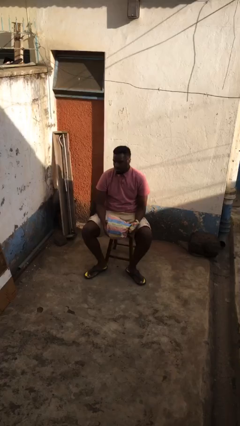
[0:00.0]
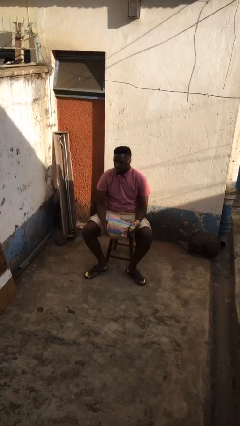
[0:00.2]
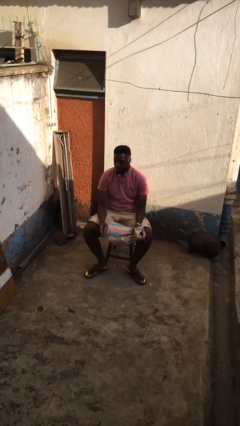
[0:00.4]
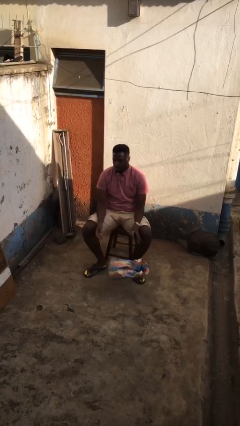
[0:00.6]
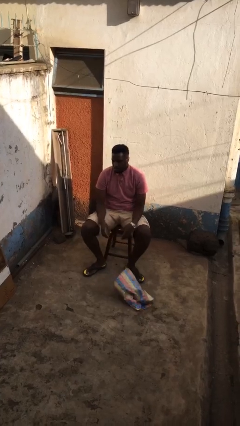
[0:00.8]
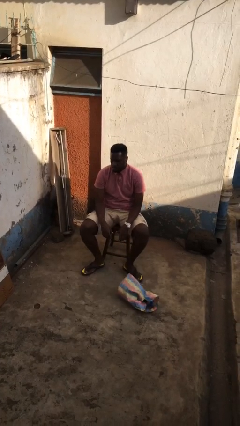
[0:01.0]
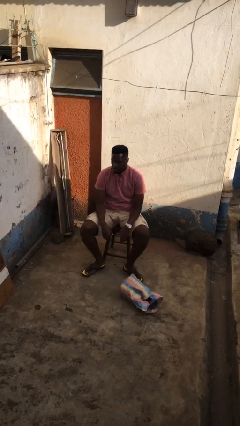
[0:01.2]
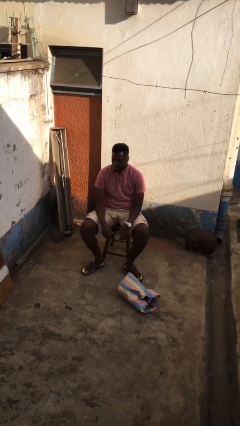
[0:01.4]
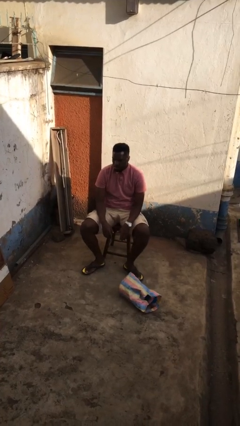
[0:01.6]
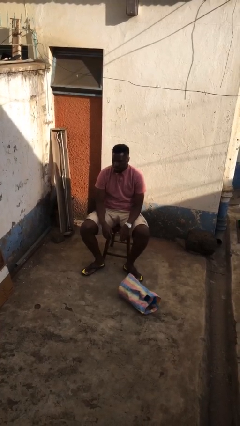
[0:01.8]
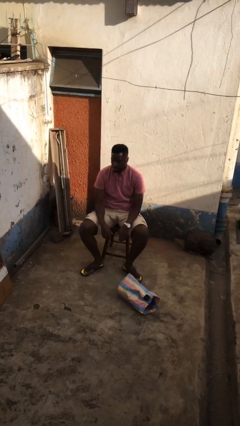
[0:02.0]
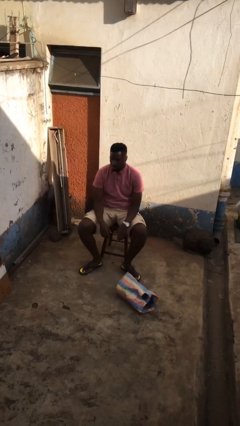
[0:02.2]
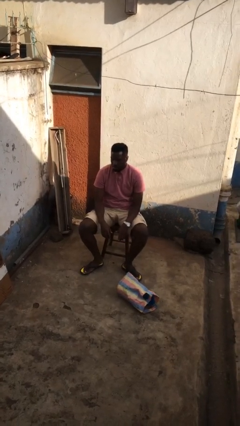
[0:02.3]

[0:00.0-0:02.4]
person drops object

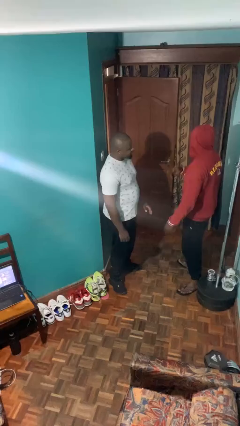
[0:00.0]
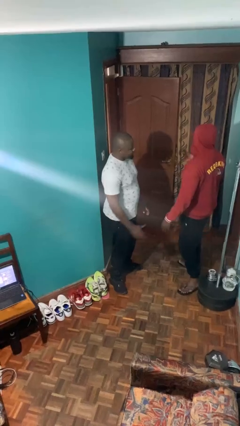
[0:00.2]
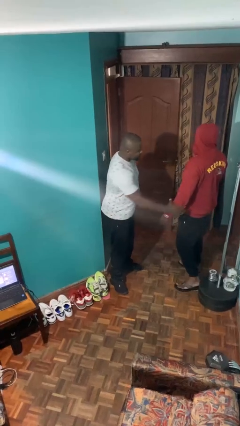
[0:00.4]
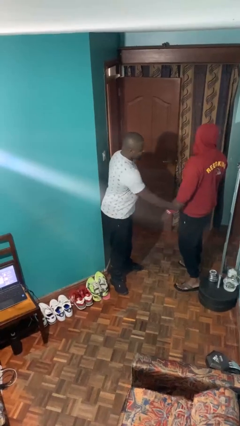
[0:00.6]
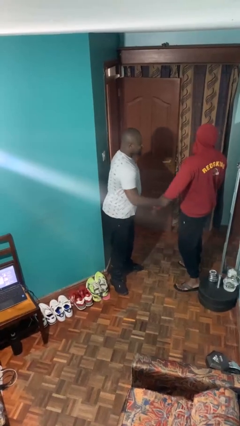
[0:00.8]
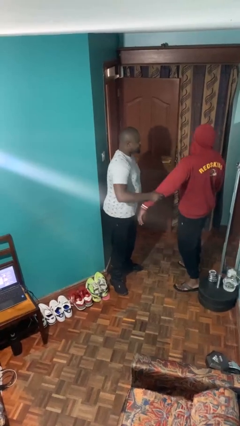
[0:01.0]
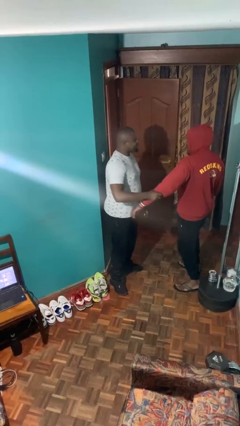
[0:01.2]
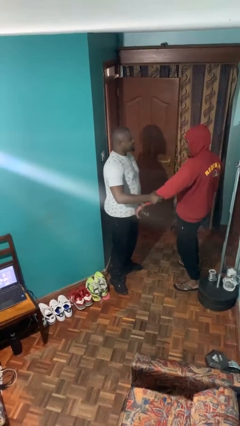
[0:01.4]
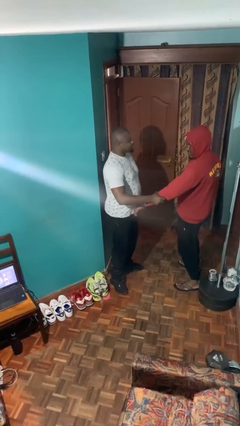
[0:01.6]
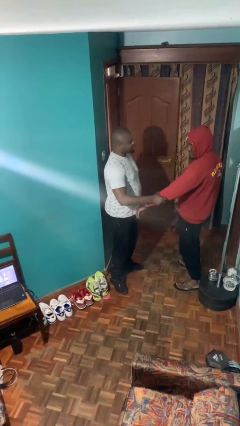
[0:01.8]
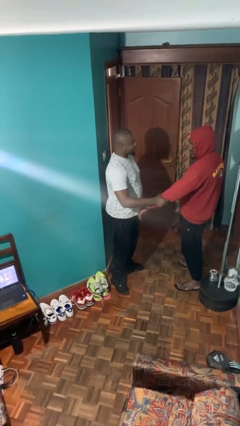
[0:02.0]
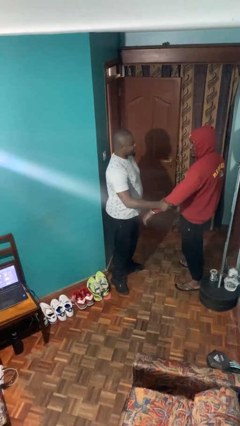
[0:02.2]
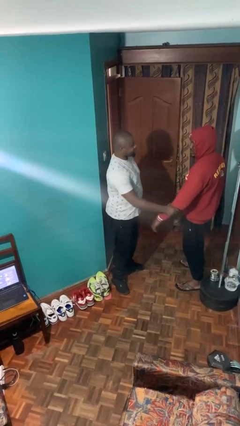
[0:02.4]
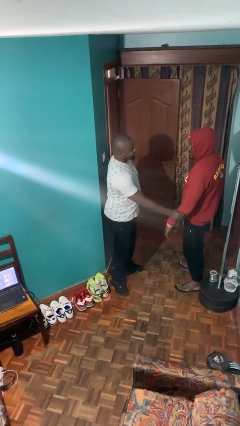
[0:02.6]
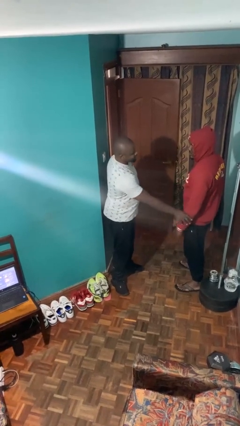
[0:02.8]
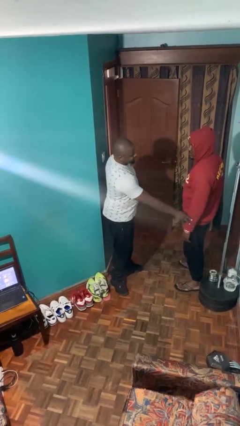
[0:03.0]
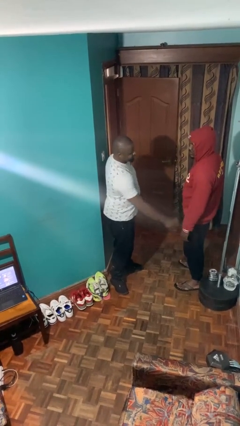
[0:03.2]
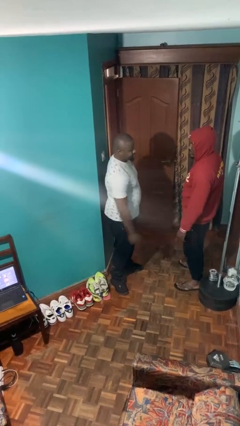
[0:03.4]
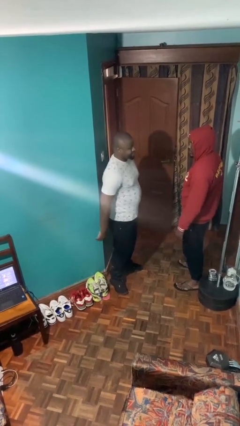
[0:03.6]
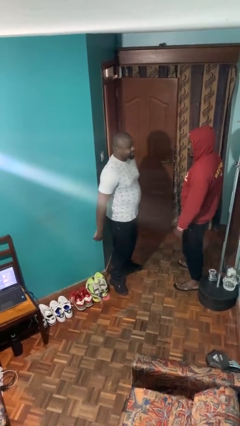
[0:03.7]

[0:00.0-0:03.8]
person grabs person by forearm

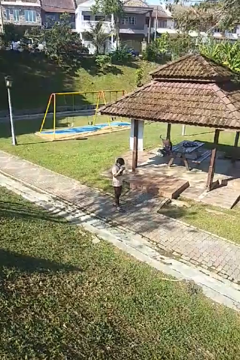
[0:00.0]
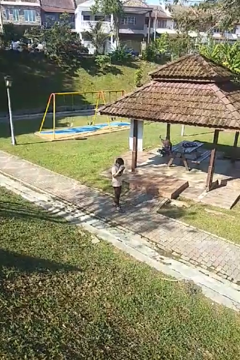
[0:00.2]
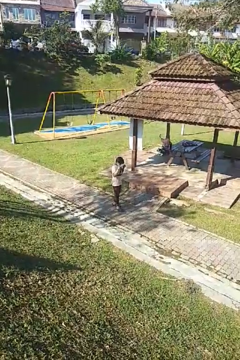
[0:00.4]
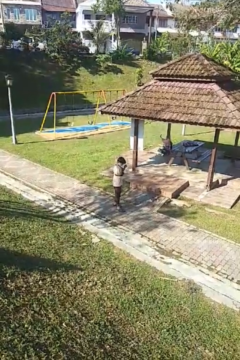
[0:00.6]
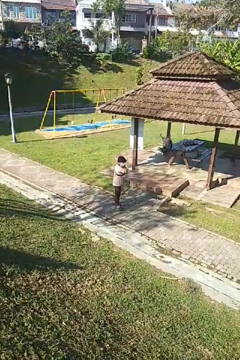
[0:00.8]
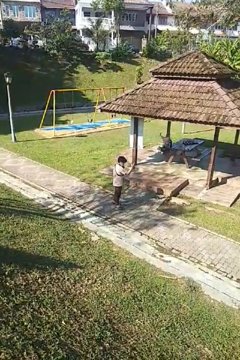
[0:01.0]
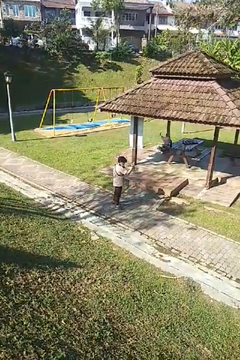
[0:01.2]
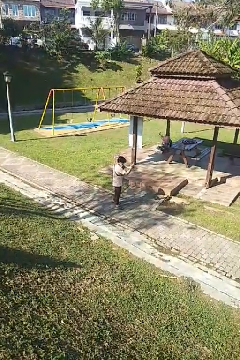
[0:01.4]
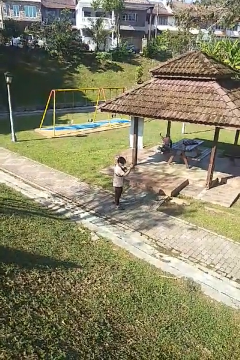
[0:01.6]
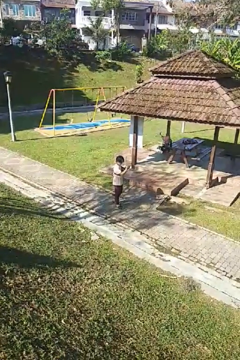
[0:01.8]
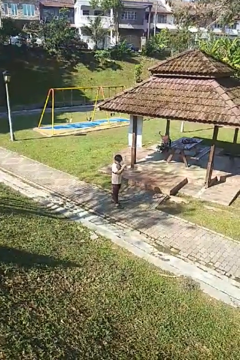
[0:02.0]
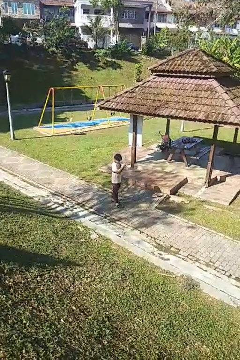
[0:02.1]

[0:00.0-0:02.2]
person karate chop

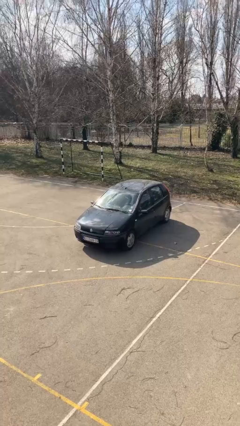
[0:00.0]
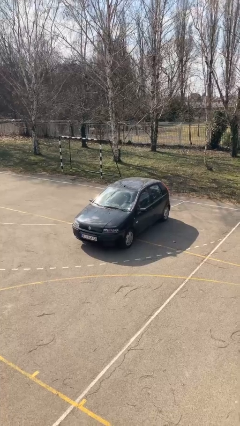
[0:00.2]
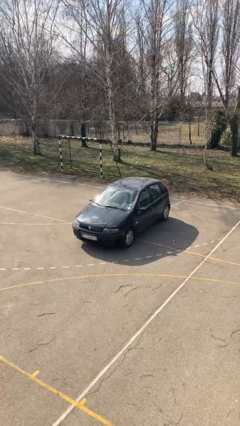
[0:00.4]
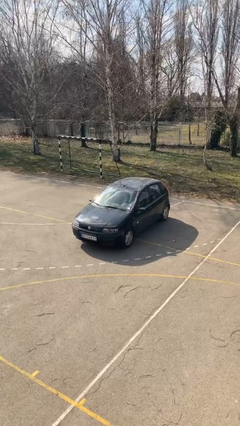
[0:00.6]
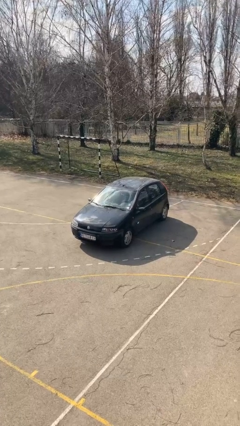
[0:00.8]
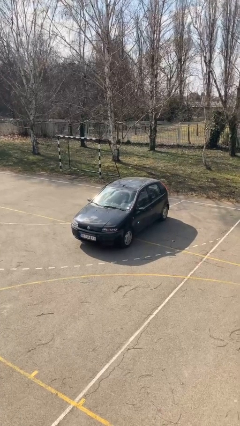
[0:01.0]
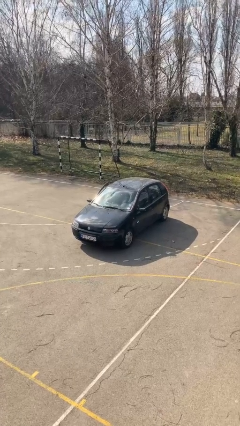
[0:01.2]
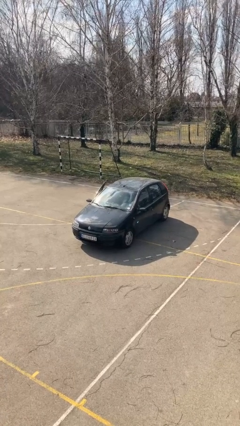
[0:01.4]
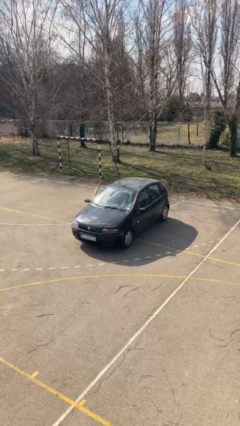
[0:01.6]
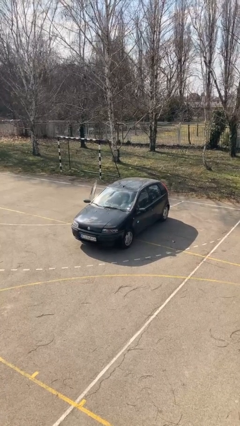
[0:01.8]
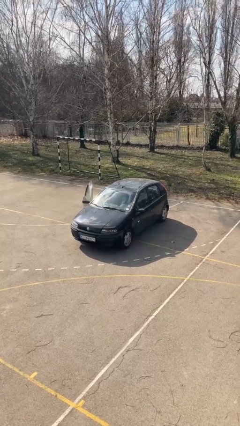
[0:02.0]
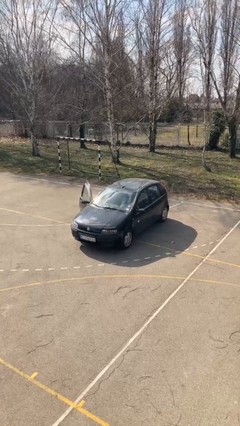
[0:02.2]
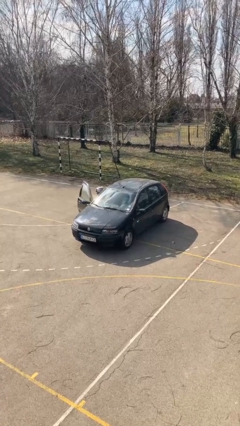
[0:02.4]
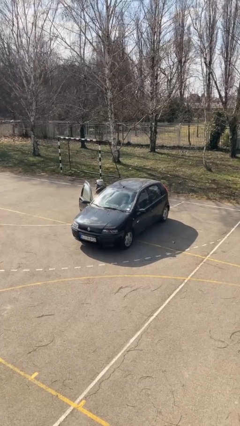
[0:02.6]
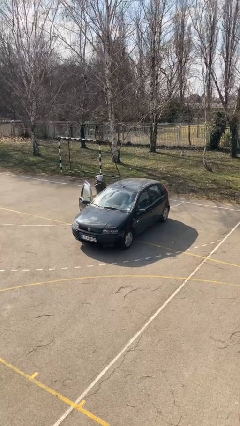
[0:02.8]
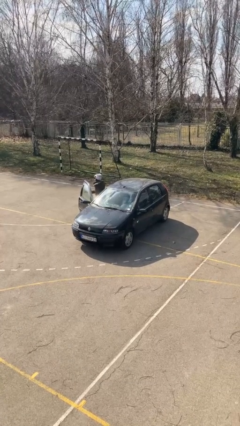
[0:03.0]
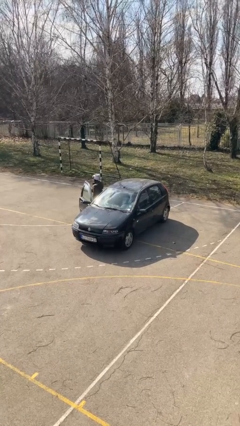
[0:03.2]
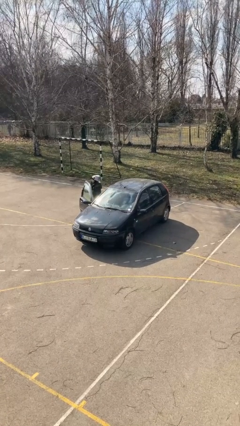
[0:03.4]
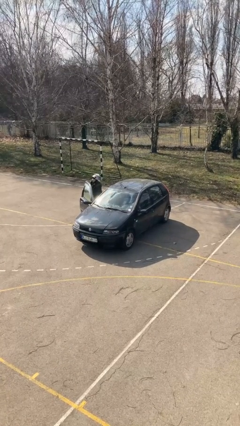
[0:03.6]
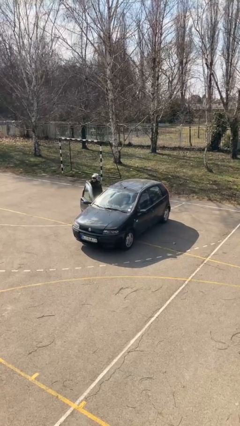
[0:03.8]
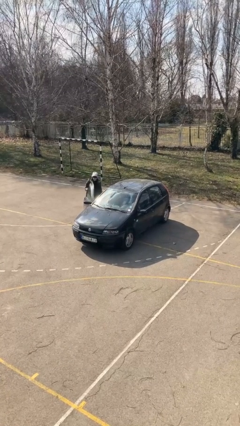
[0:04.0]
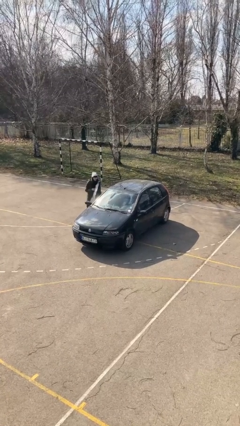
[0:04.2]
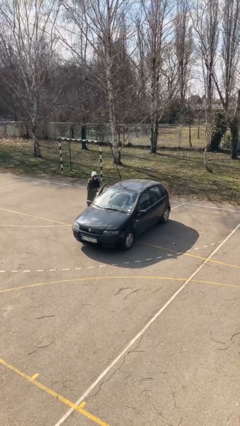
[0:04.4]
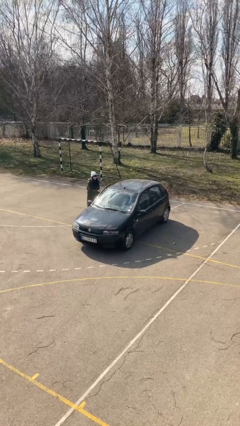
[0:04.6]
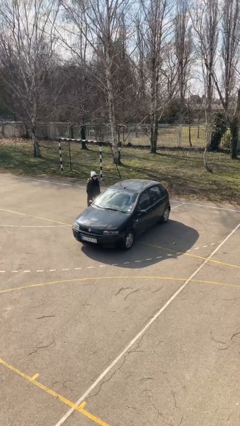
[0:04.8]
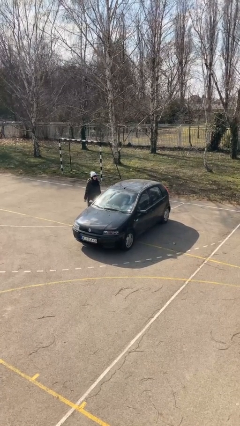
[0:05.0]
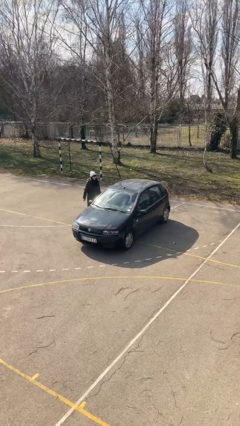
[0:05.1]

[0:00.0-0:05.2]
car drops off person

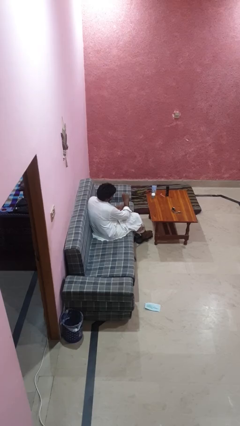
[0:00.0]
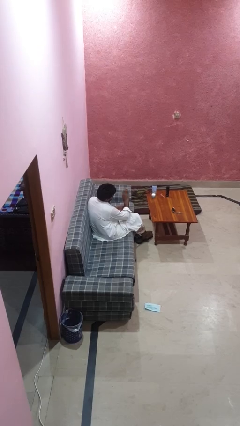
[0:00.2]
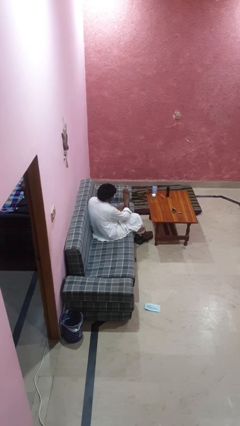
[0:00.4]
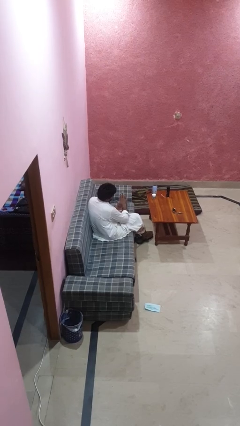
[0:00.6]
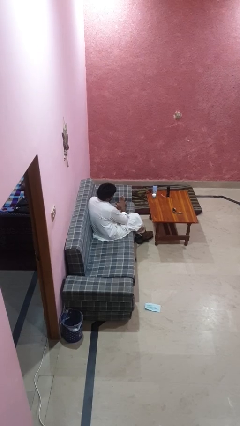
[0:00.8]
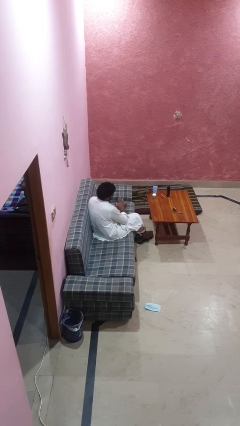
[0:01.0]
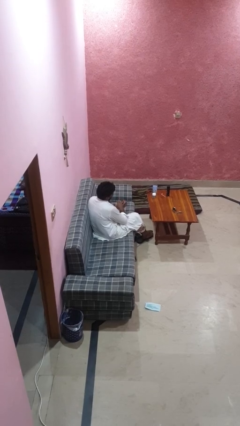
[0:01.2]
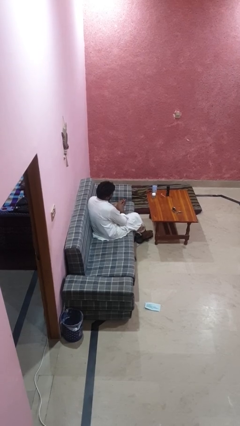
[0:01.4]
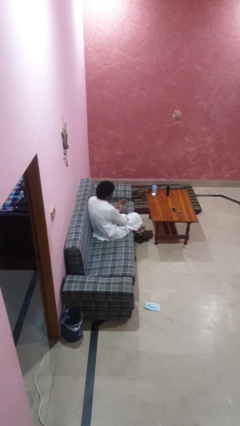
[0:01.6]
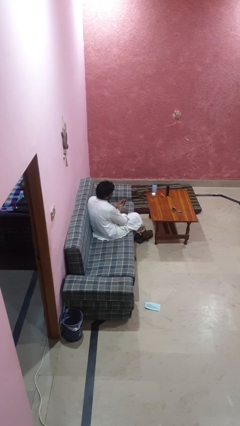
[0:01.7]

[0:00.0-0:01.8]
person takes off ring

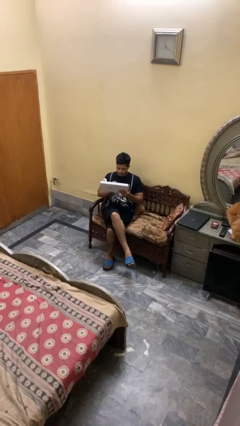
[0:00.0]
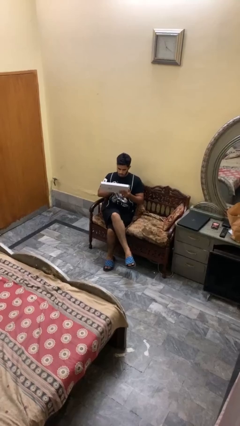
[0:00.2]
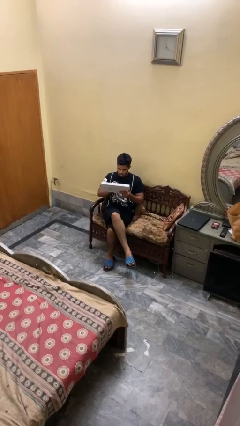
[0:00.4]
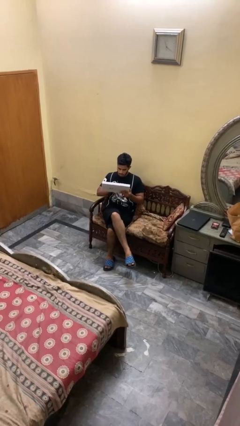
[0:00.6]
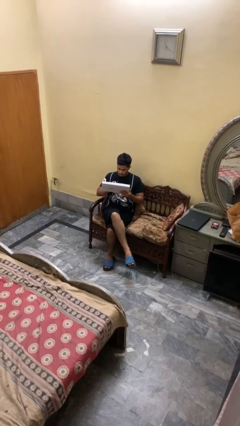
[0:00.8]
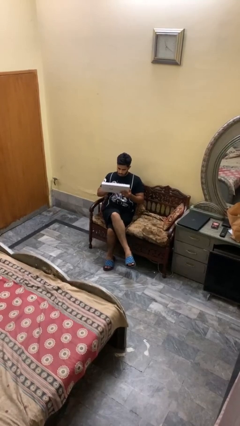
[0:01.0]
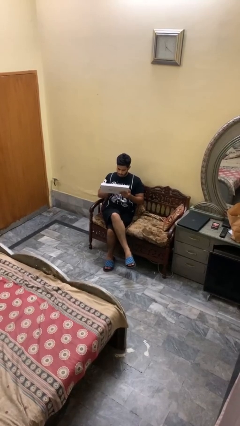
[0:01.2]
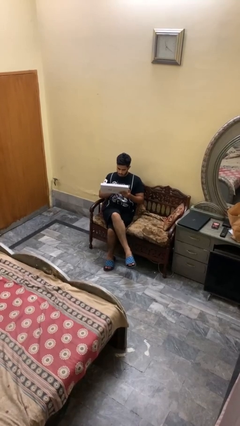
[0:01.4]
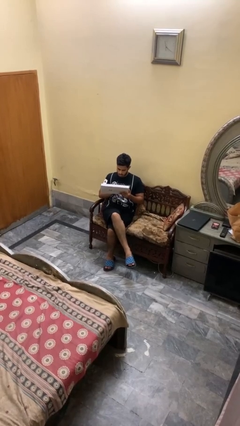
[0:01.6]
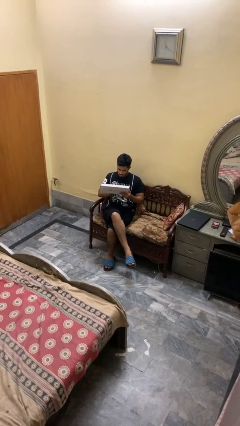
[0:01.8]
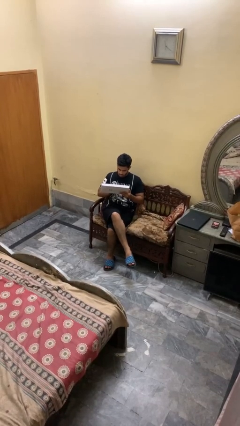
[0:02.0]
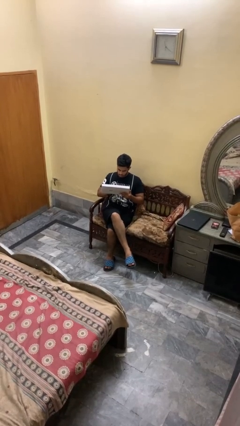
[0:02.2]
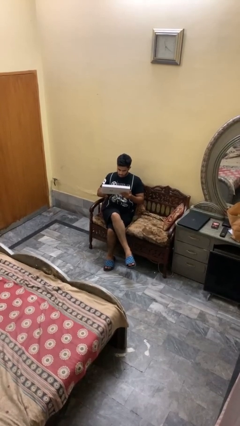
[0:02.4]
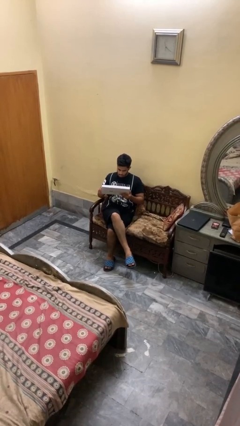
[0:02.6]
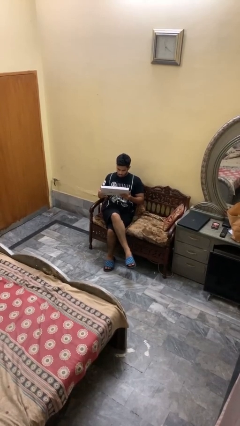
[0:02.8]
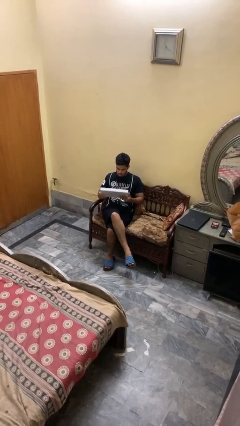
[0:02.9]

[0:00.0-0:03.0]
person interacts with tablet
